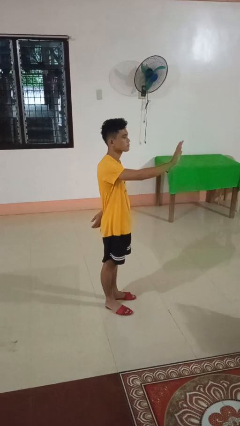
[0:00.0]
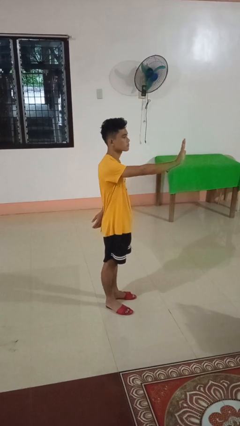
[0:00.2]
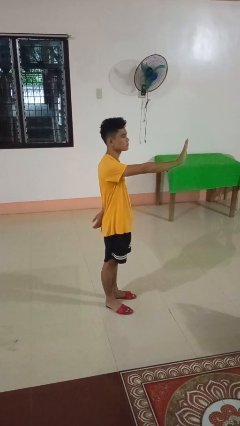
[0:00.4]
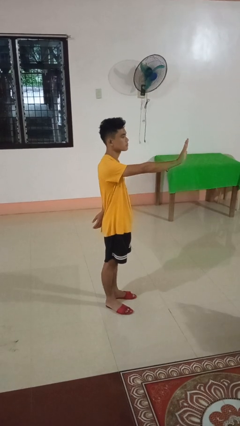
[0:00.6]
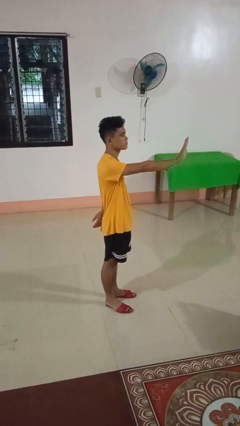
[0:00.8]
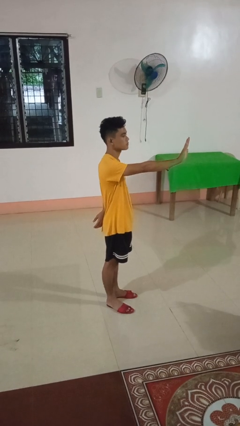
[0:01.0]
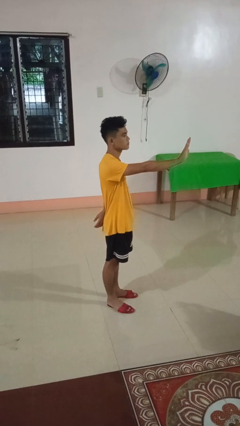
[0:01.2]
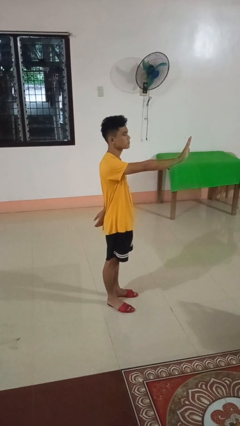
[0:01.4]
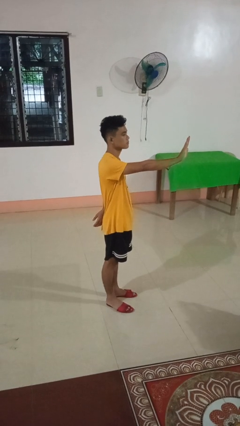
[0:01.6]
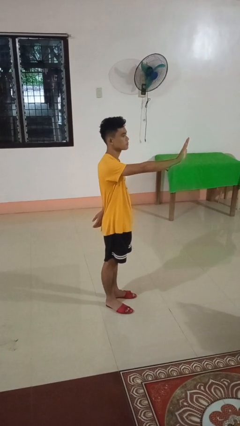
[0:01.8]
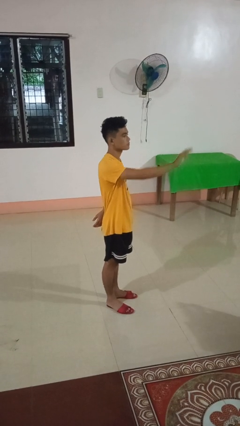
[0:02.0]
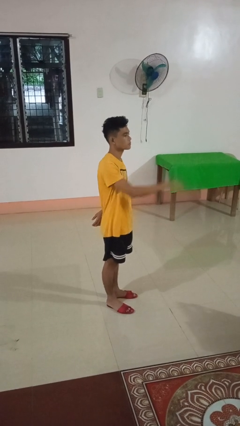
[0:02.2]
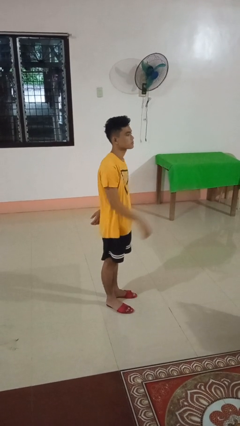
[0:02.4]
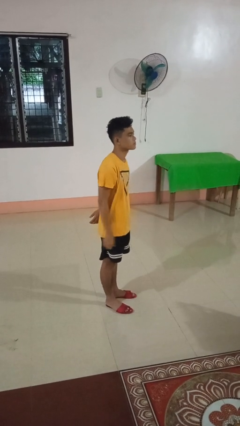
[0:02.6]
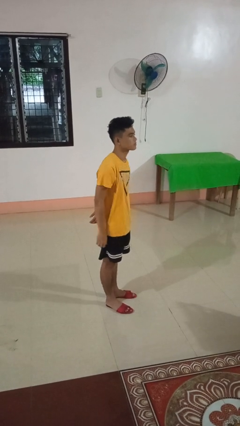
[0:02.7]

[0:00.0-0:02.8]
person gestures stop

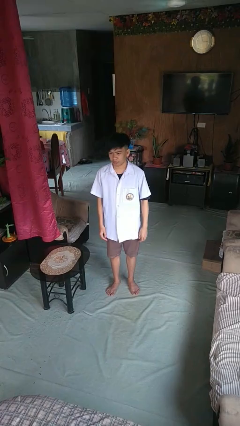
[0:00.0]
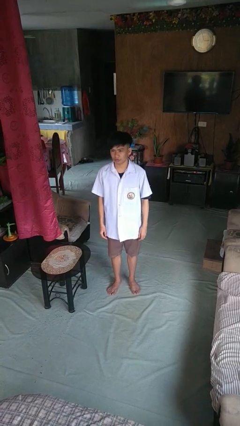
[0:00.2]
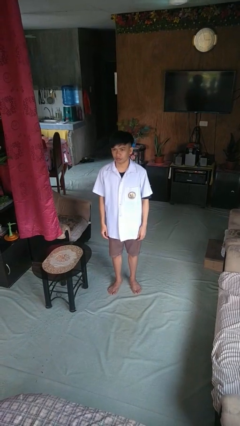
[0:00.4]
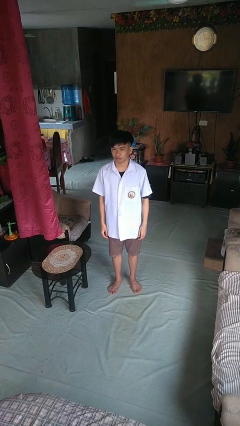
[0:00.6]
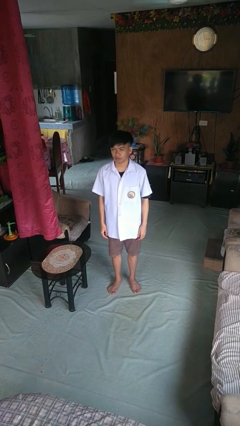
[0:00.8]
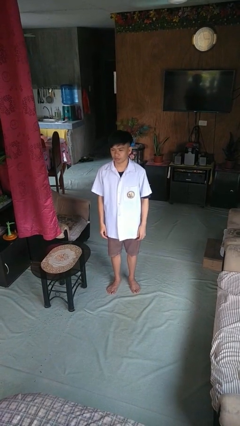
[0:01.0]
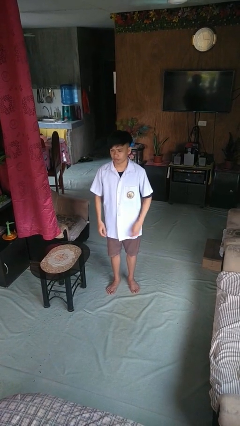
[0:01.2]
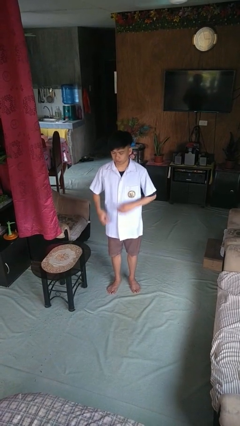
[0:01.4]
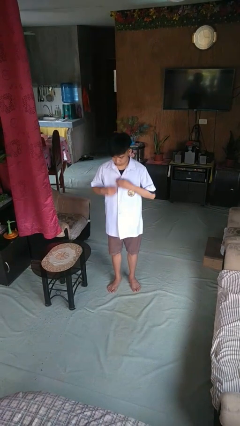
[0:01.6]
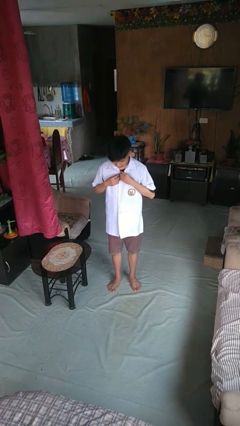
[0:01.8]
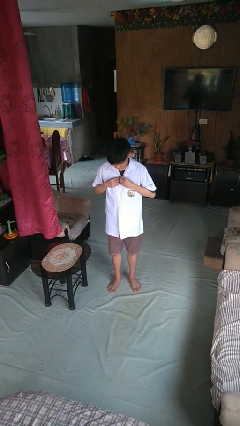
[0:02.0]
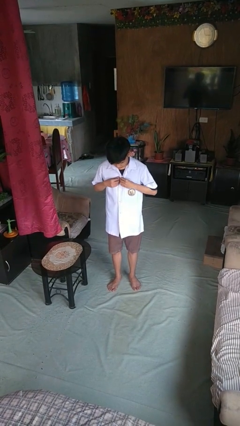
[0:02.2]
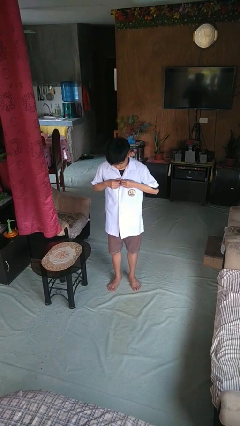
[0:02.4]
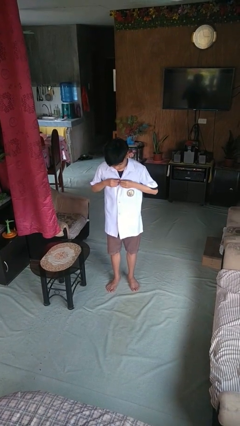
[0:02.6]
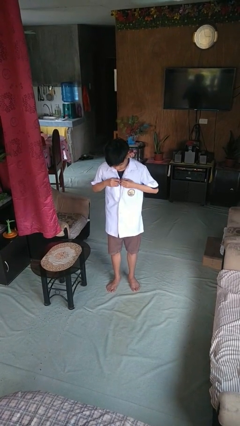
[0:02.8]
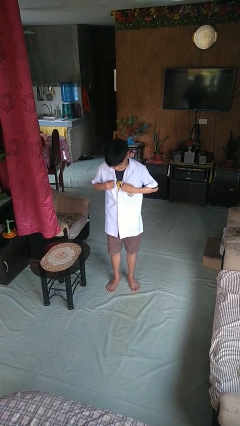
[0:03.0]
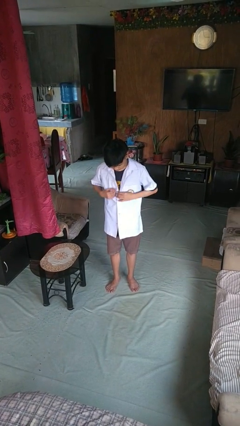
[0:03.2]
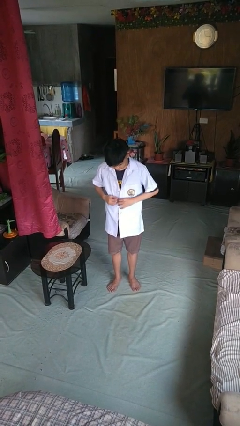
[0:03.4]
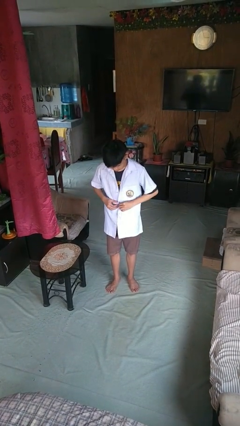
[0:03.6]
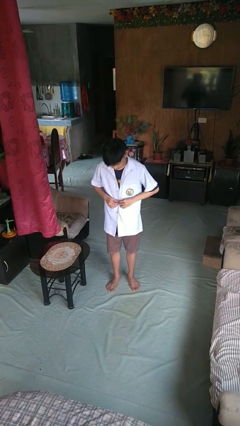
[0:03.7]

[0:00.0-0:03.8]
person unbuttons shirt

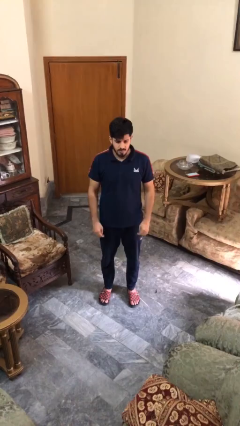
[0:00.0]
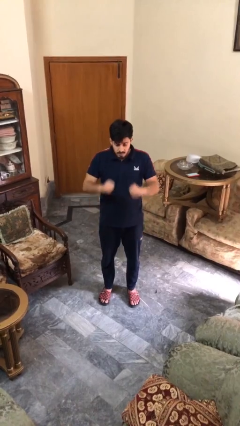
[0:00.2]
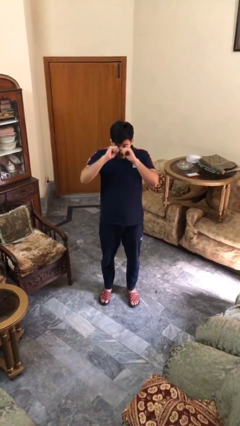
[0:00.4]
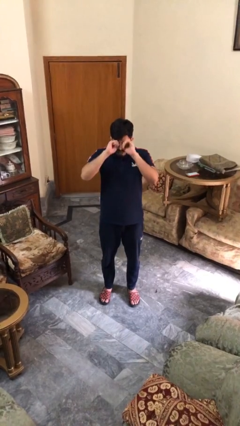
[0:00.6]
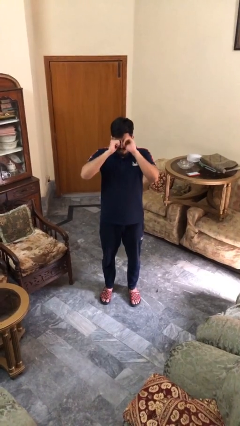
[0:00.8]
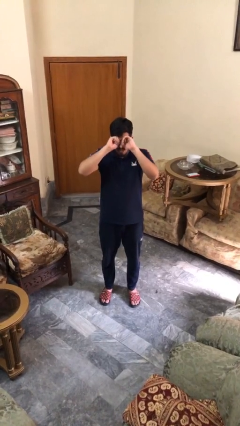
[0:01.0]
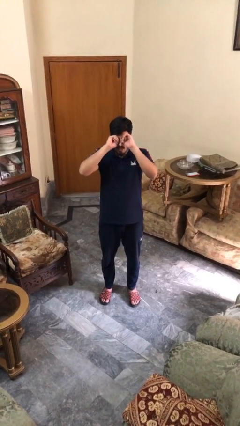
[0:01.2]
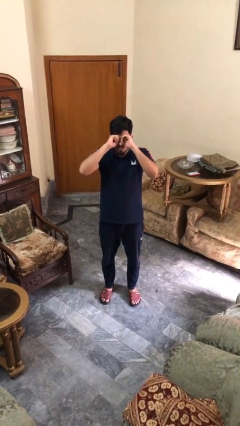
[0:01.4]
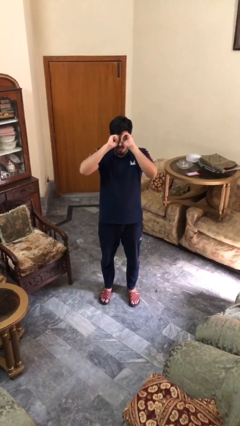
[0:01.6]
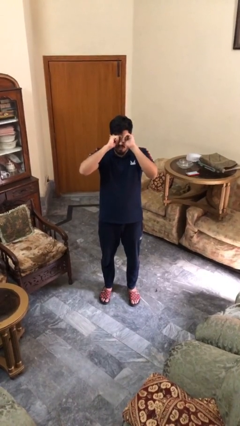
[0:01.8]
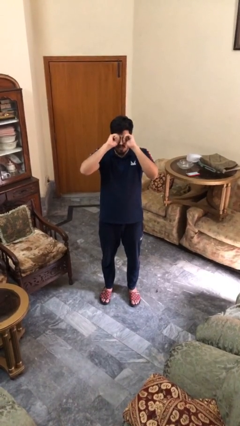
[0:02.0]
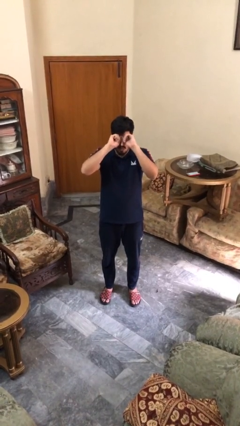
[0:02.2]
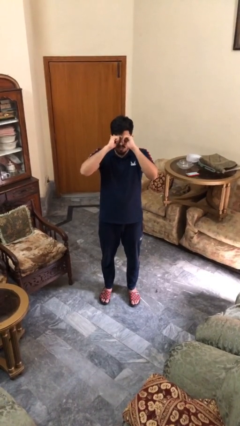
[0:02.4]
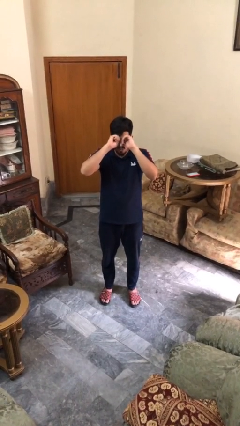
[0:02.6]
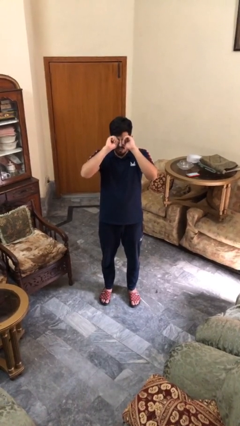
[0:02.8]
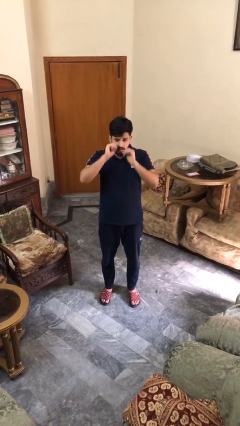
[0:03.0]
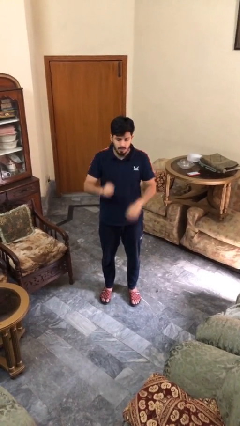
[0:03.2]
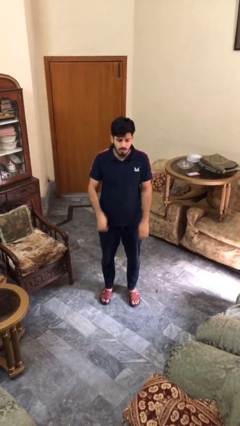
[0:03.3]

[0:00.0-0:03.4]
person rubs eyes

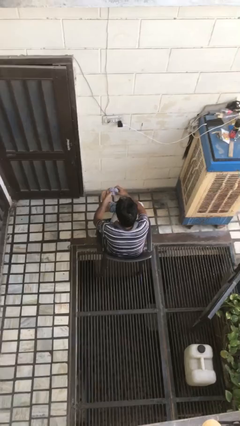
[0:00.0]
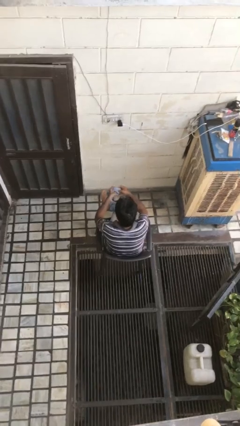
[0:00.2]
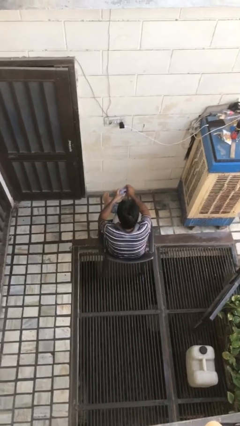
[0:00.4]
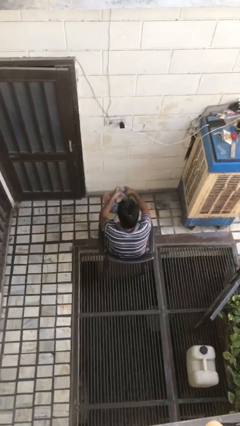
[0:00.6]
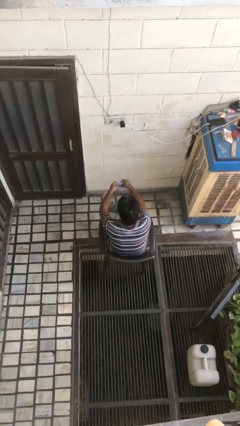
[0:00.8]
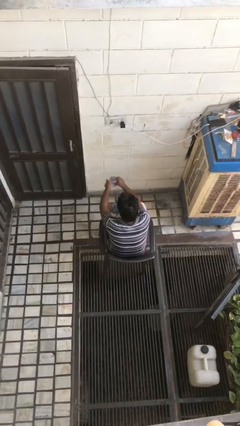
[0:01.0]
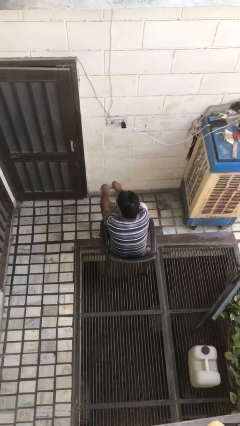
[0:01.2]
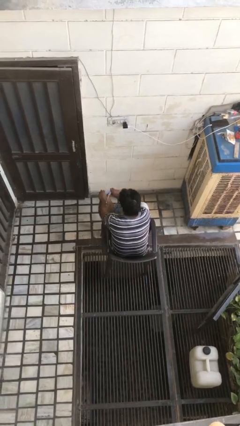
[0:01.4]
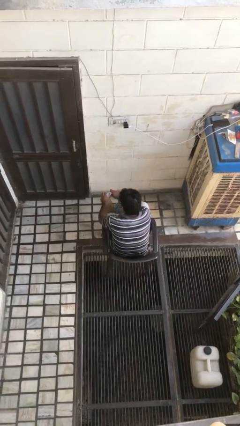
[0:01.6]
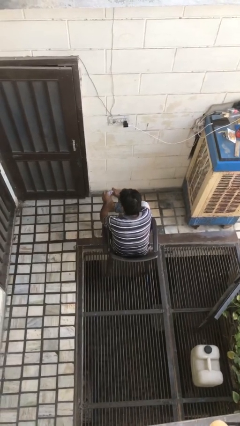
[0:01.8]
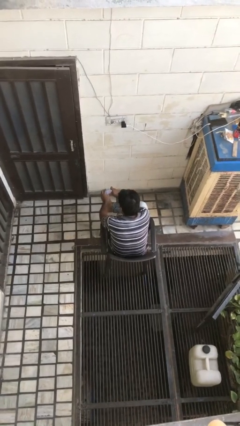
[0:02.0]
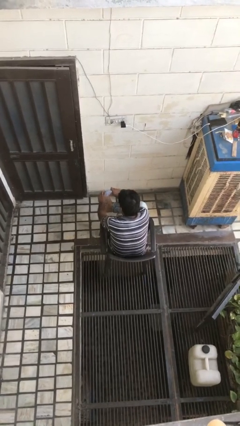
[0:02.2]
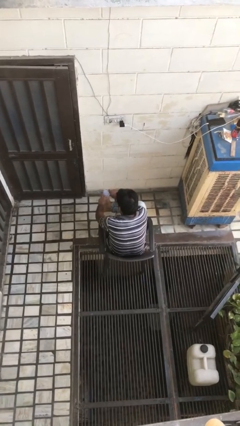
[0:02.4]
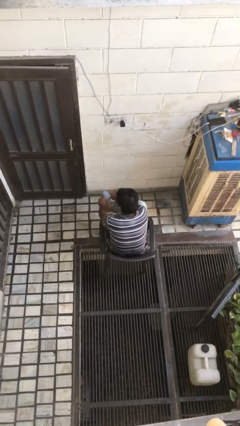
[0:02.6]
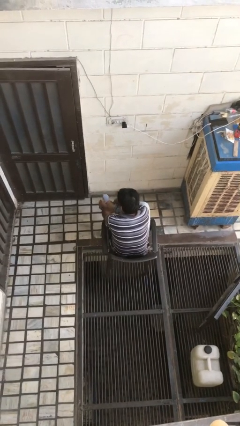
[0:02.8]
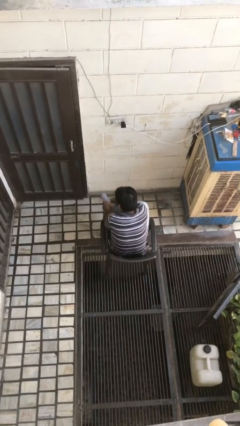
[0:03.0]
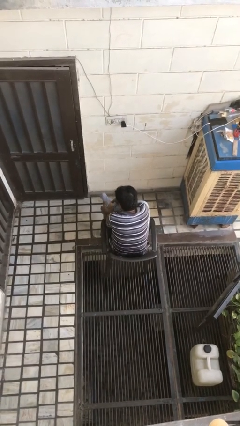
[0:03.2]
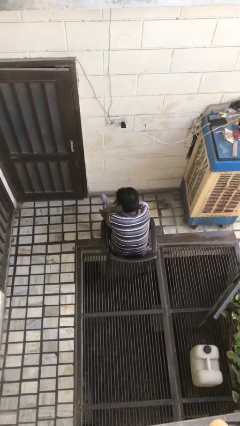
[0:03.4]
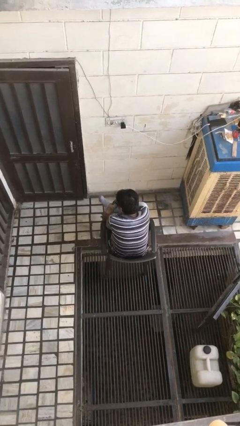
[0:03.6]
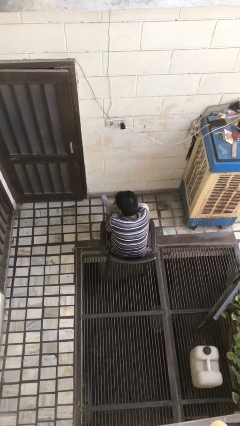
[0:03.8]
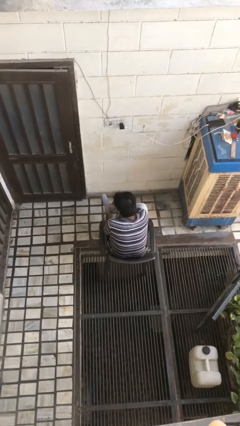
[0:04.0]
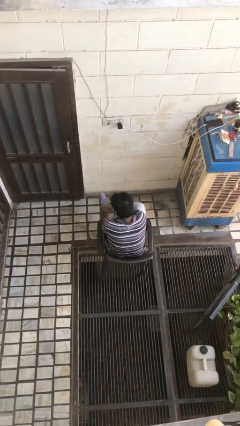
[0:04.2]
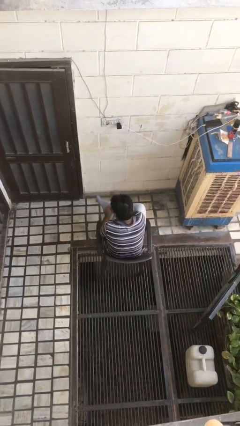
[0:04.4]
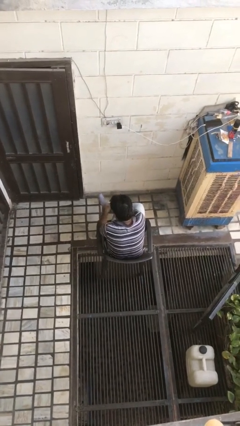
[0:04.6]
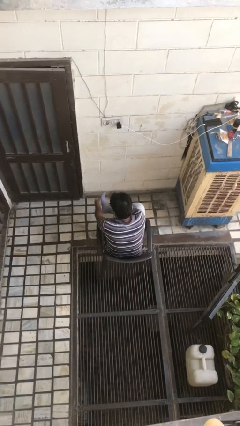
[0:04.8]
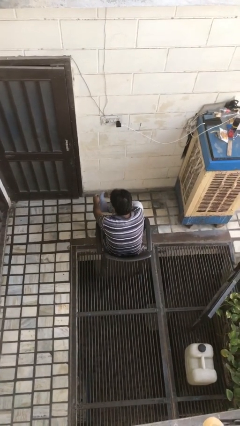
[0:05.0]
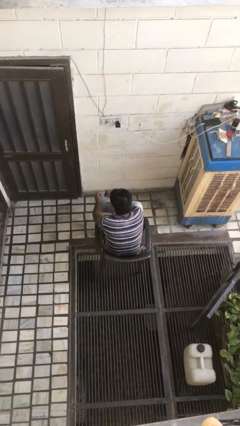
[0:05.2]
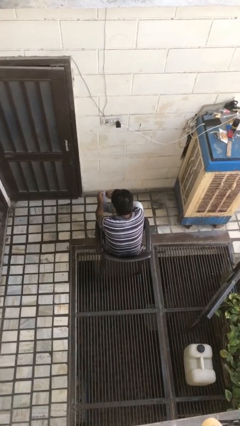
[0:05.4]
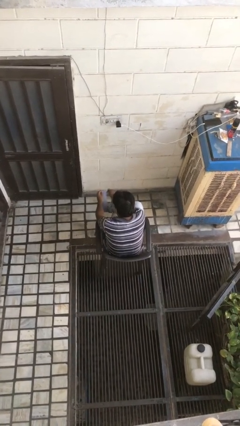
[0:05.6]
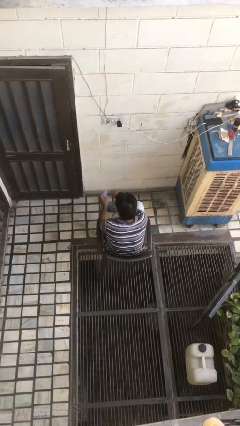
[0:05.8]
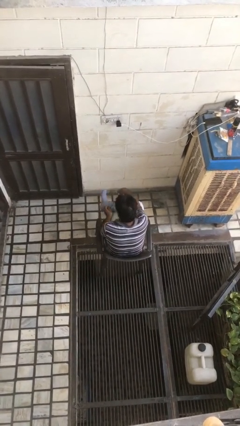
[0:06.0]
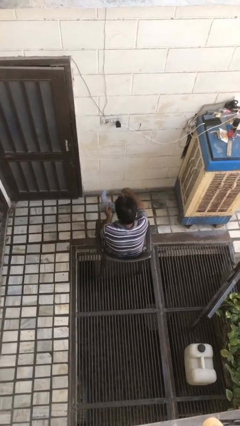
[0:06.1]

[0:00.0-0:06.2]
person puts on socks

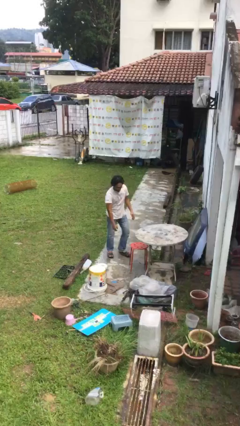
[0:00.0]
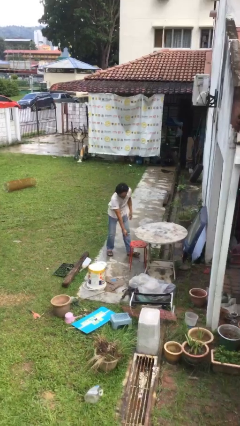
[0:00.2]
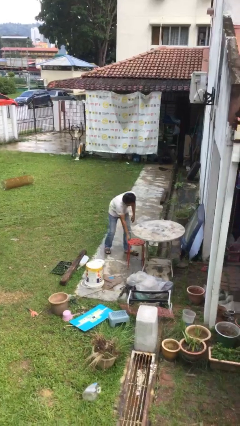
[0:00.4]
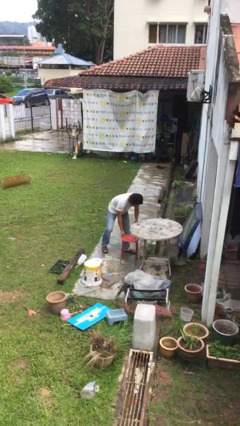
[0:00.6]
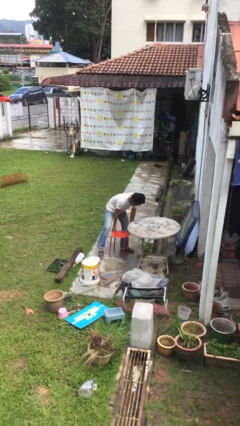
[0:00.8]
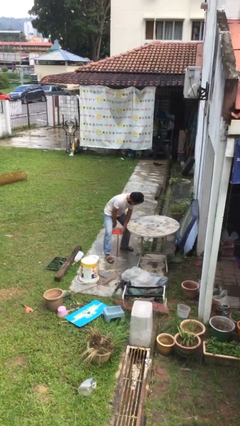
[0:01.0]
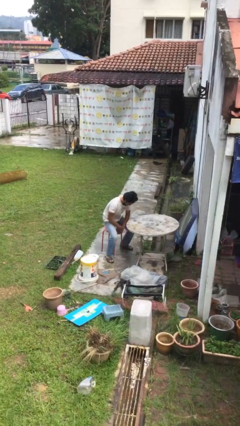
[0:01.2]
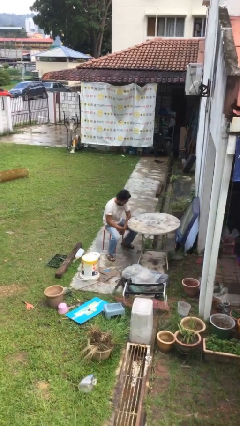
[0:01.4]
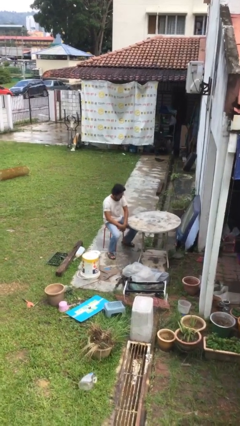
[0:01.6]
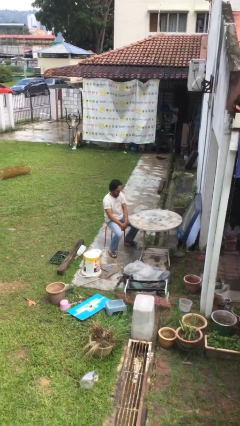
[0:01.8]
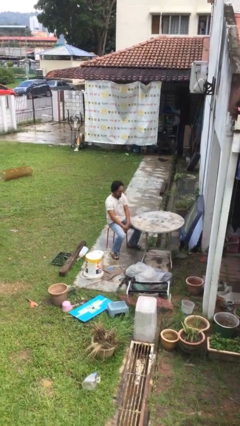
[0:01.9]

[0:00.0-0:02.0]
person sits down
